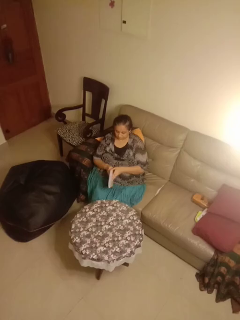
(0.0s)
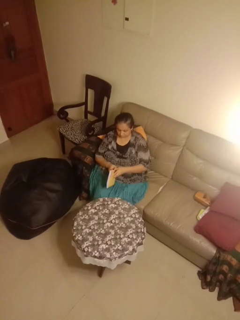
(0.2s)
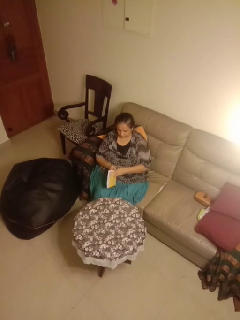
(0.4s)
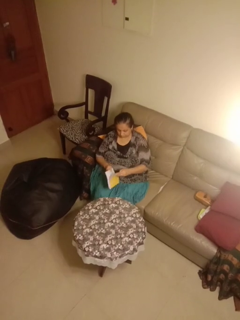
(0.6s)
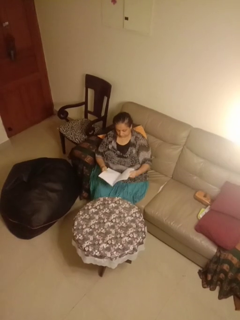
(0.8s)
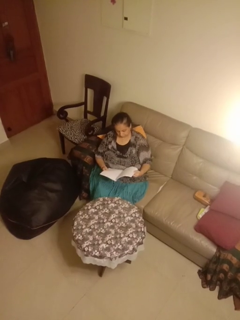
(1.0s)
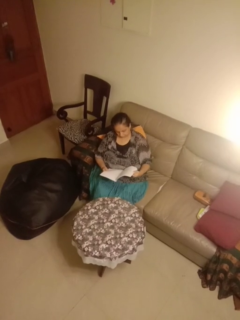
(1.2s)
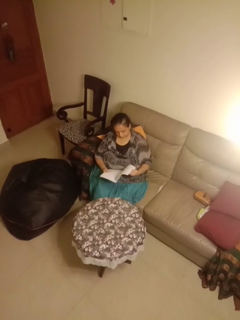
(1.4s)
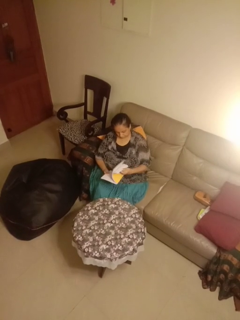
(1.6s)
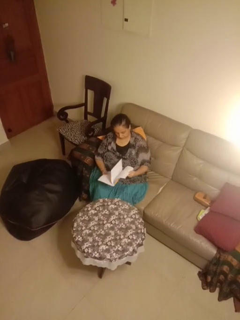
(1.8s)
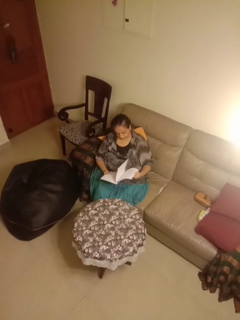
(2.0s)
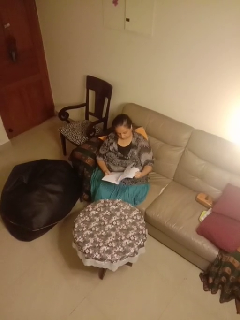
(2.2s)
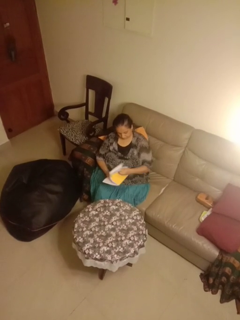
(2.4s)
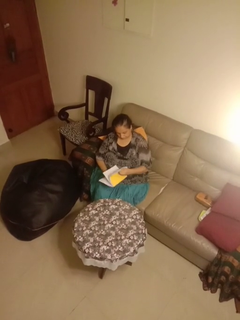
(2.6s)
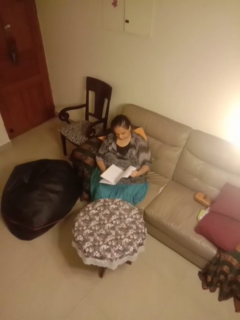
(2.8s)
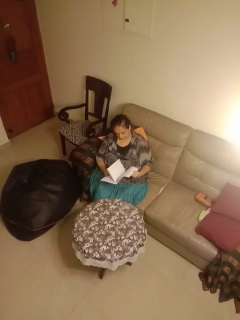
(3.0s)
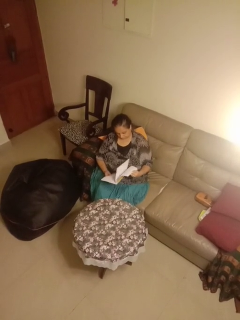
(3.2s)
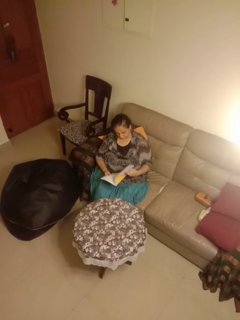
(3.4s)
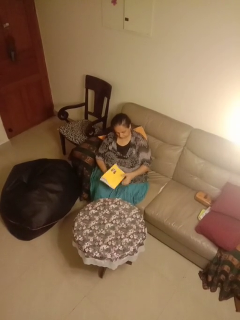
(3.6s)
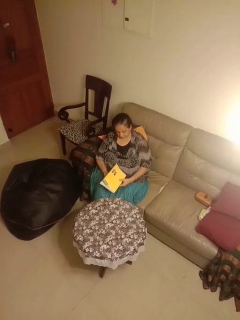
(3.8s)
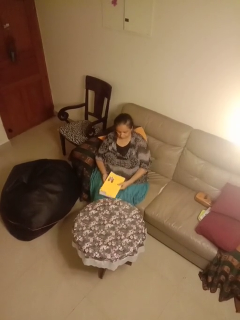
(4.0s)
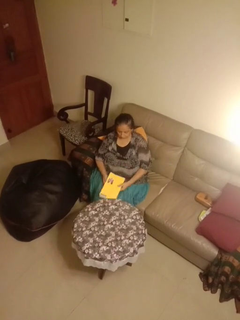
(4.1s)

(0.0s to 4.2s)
person reads magazine

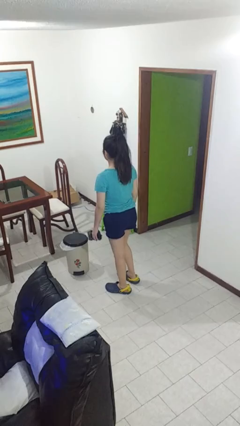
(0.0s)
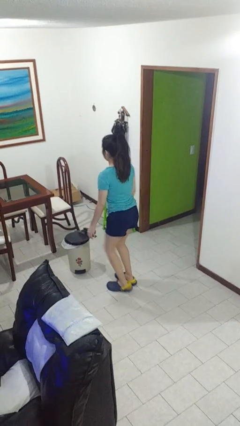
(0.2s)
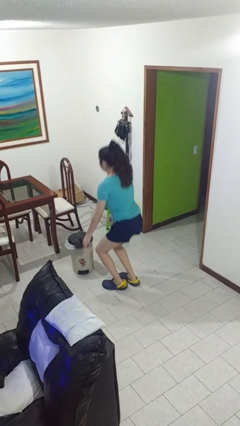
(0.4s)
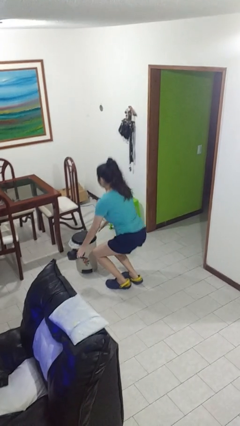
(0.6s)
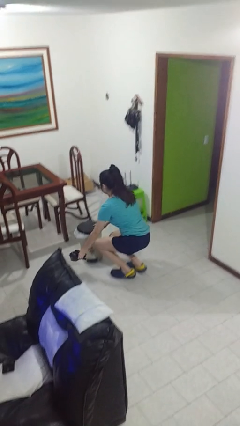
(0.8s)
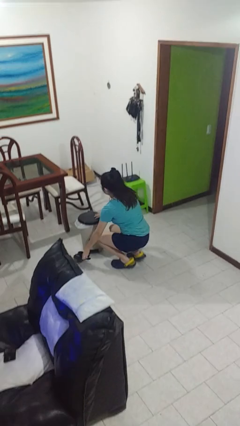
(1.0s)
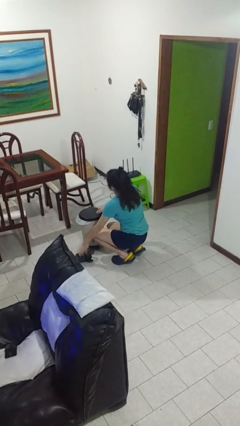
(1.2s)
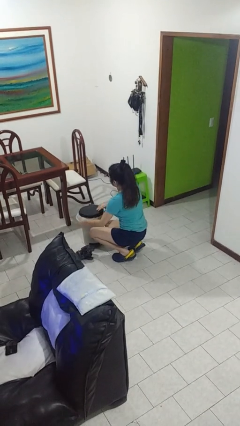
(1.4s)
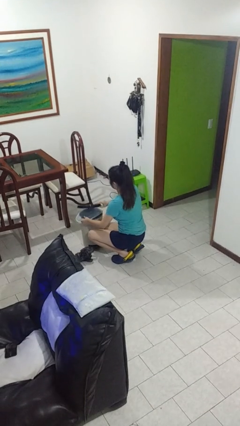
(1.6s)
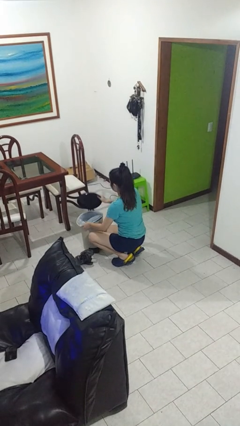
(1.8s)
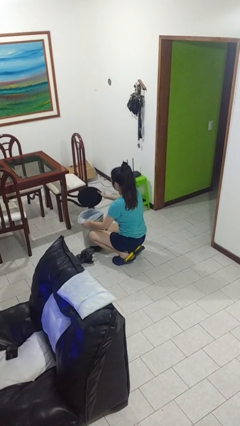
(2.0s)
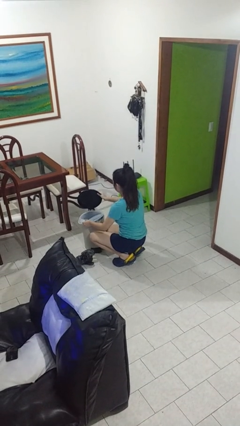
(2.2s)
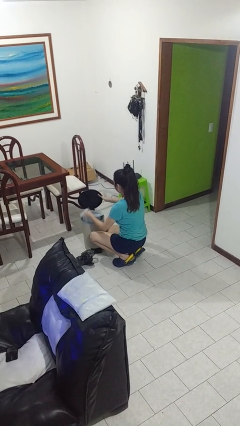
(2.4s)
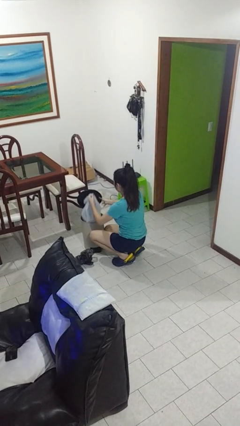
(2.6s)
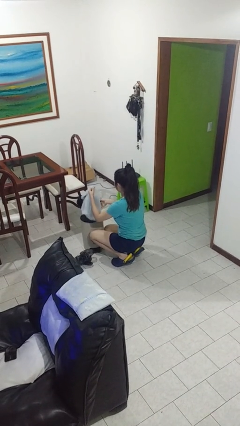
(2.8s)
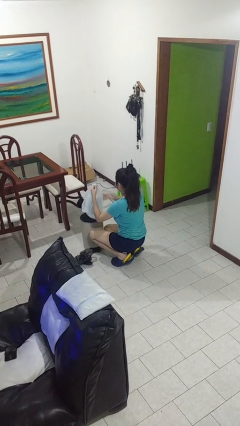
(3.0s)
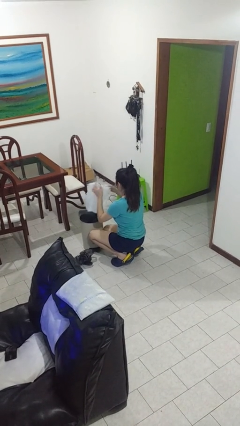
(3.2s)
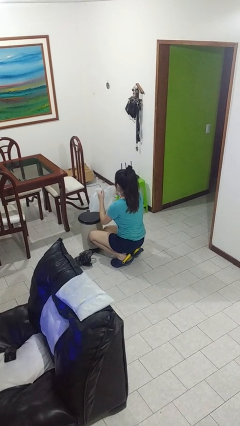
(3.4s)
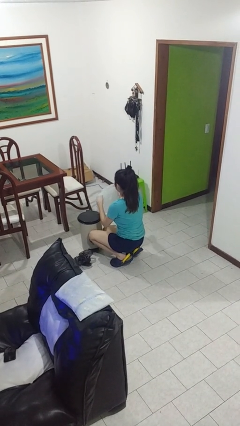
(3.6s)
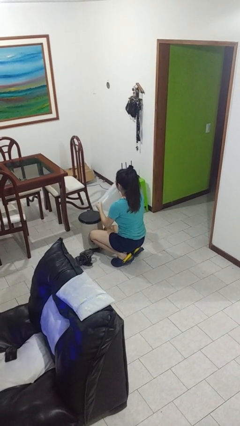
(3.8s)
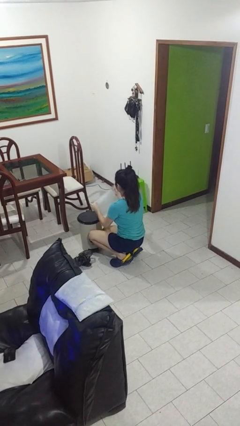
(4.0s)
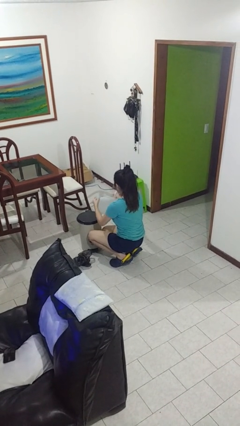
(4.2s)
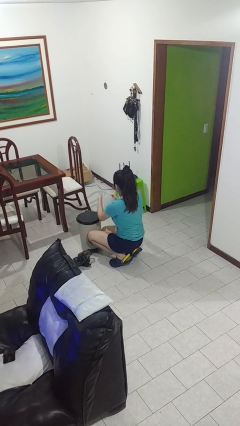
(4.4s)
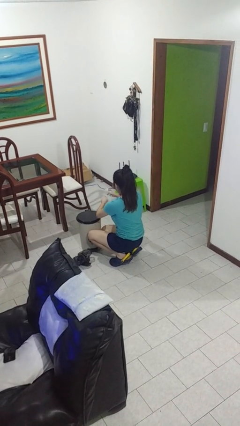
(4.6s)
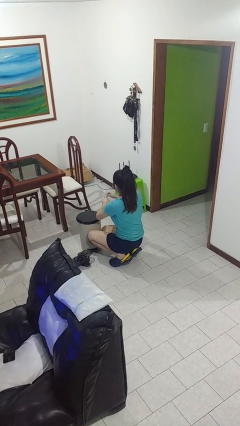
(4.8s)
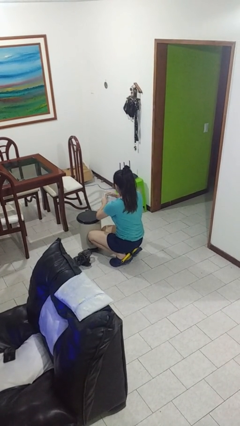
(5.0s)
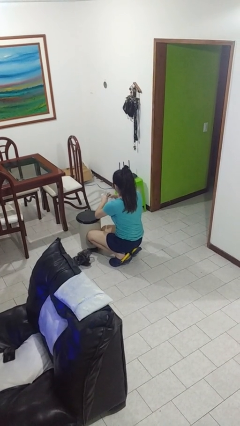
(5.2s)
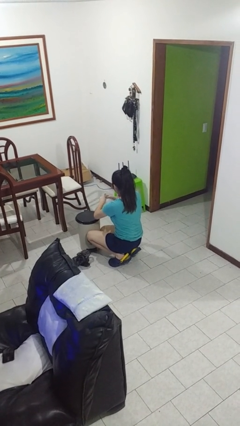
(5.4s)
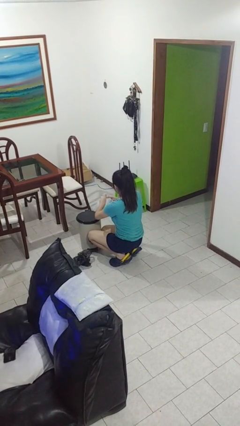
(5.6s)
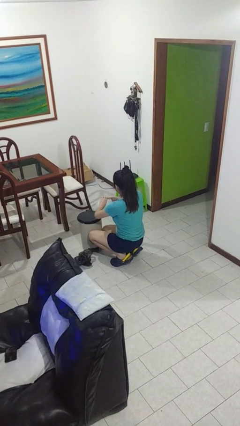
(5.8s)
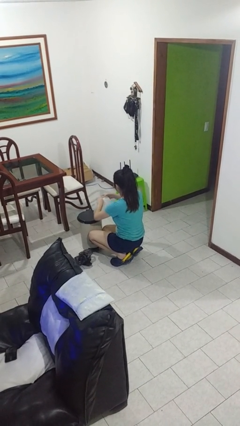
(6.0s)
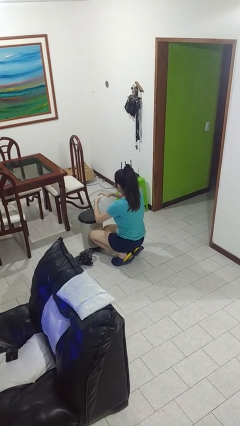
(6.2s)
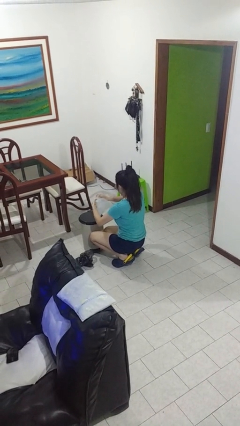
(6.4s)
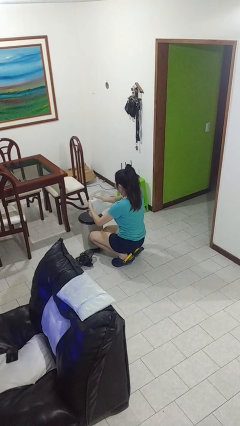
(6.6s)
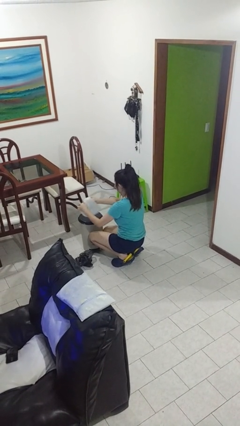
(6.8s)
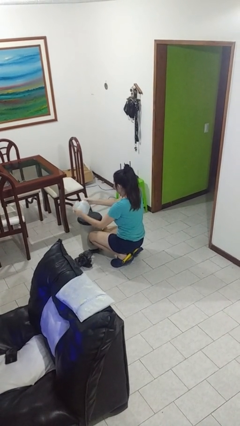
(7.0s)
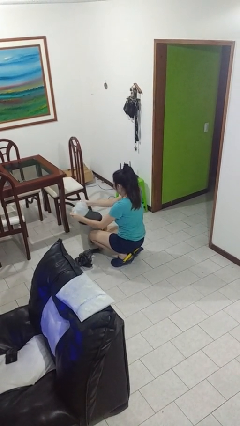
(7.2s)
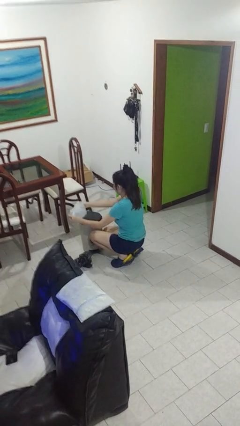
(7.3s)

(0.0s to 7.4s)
person removes trashbag from trashcan

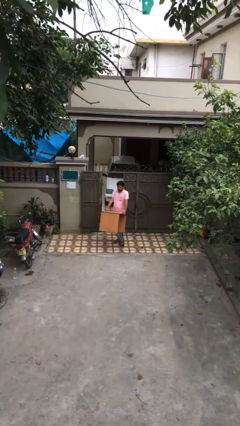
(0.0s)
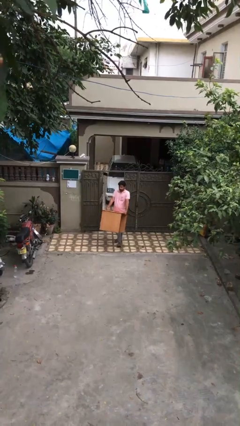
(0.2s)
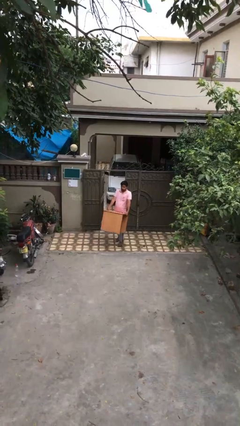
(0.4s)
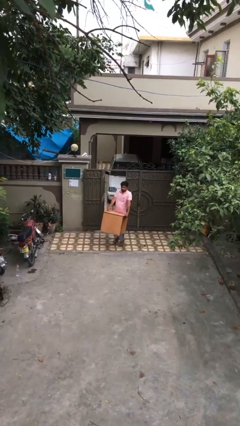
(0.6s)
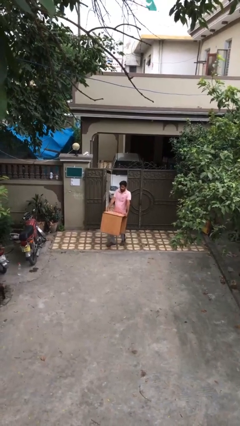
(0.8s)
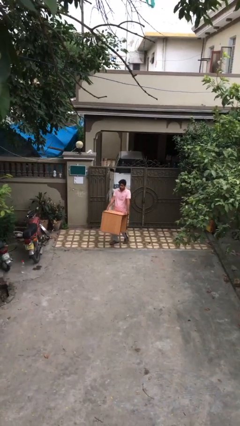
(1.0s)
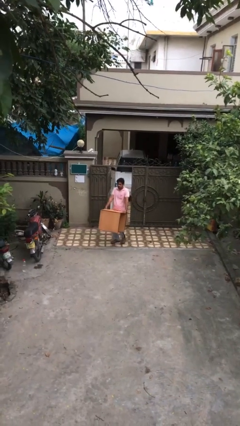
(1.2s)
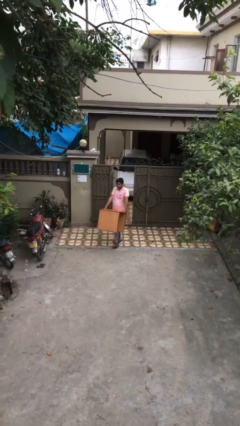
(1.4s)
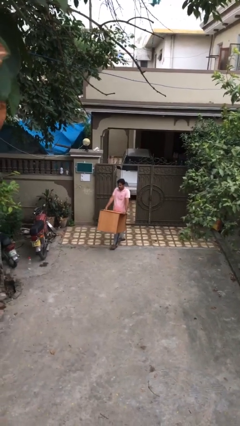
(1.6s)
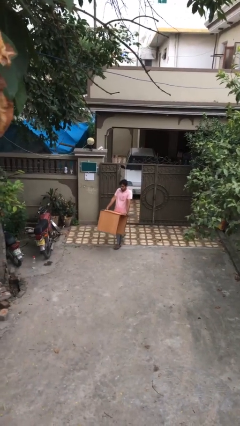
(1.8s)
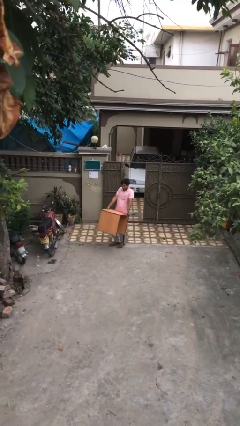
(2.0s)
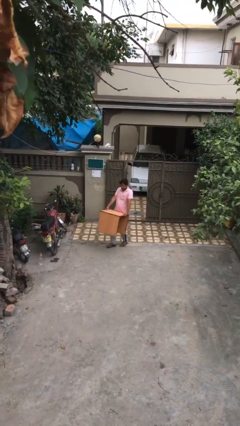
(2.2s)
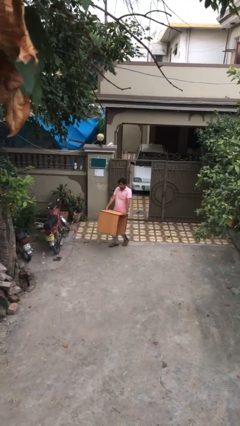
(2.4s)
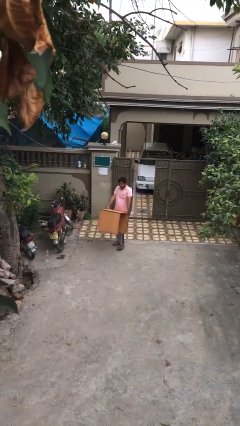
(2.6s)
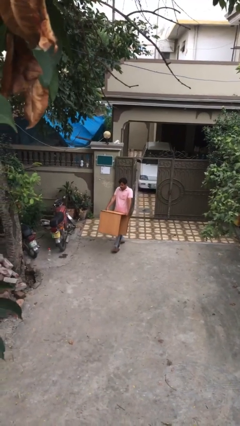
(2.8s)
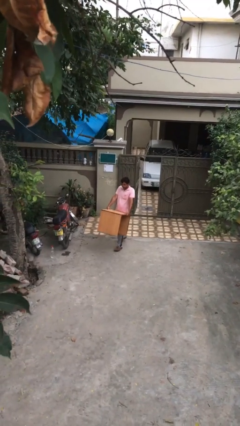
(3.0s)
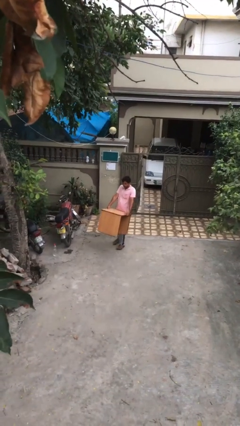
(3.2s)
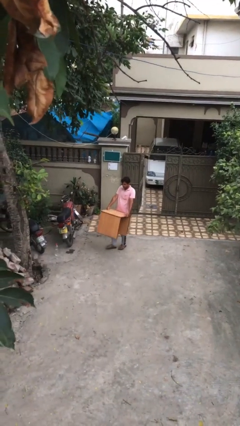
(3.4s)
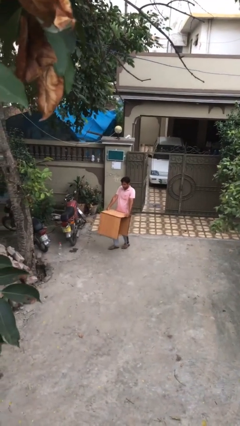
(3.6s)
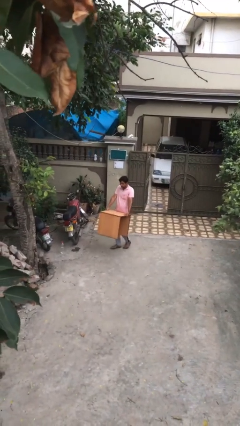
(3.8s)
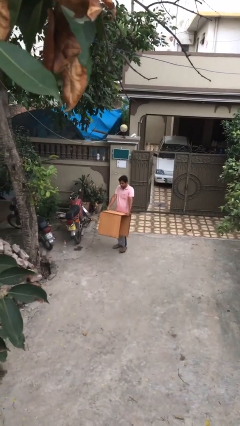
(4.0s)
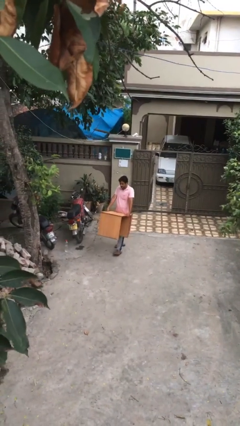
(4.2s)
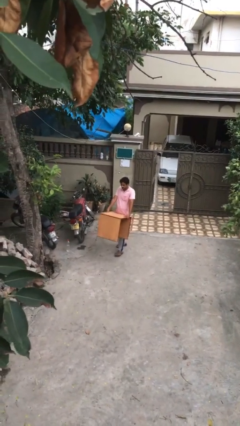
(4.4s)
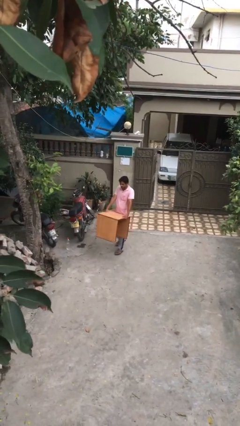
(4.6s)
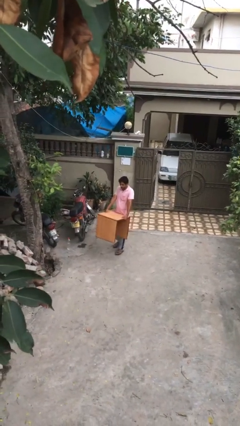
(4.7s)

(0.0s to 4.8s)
person carries heavy object

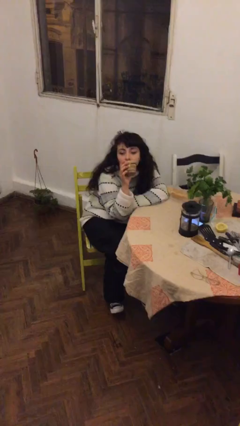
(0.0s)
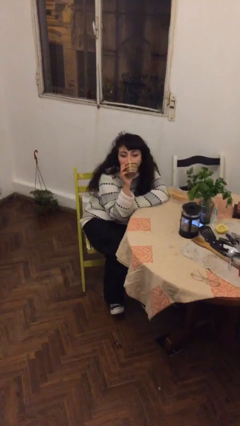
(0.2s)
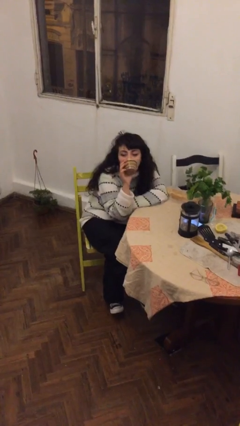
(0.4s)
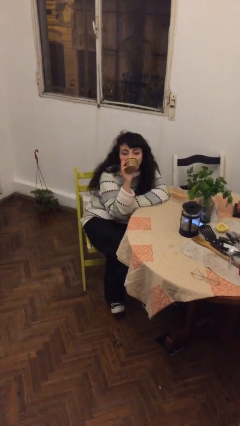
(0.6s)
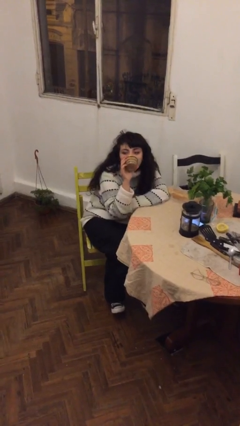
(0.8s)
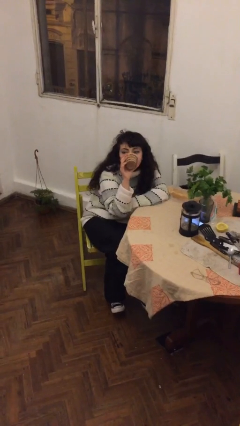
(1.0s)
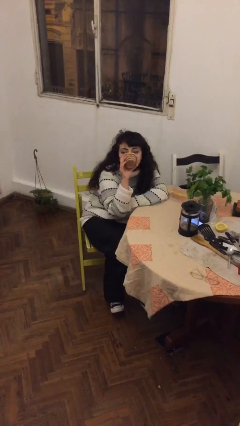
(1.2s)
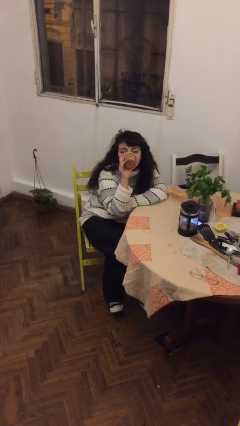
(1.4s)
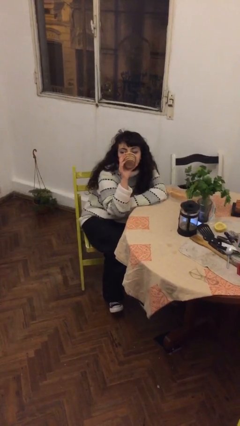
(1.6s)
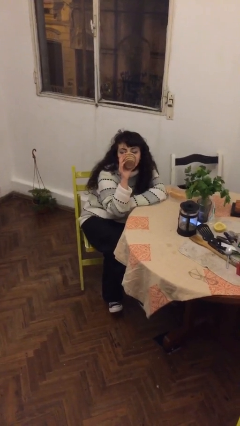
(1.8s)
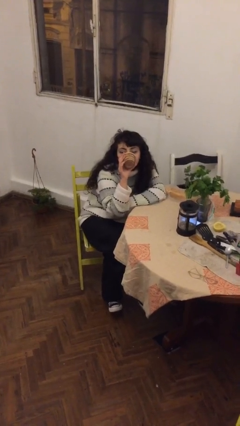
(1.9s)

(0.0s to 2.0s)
person drinks from mug

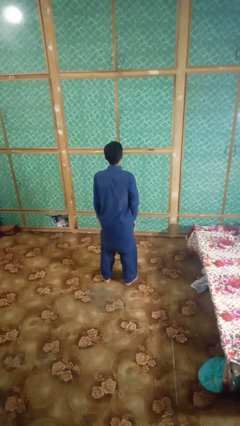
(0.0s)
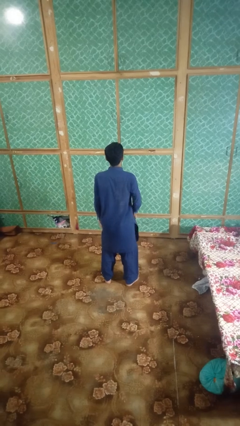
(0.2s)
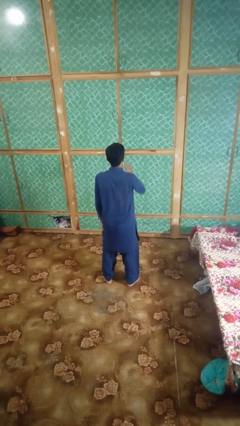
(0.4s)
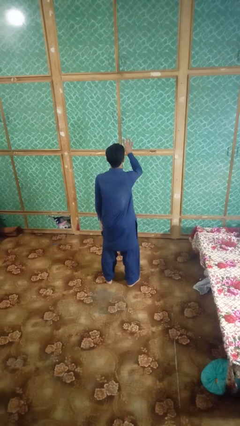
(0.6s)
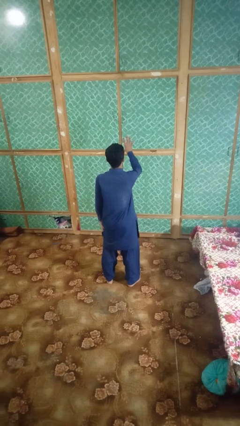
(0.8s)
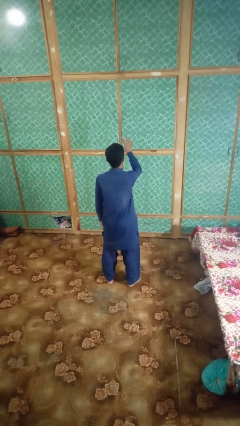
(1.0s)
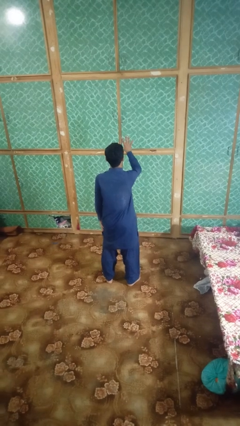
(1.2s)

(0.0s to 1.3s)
person gestures number four
